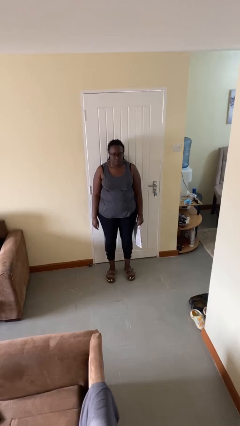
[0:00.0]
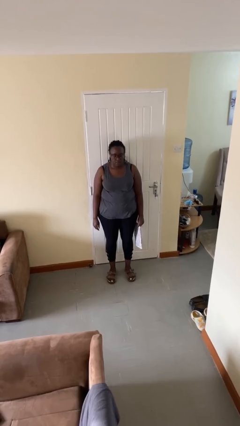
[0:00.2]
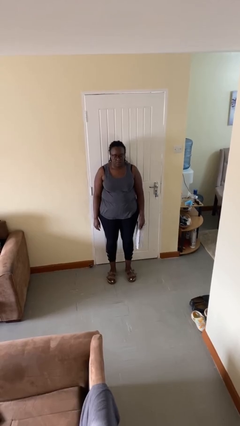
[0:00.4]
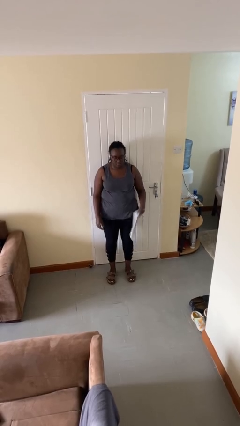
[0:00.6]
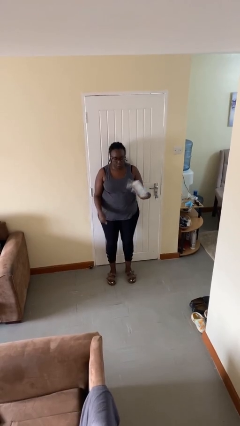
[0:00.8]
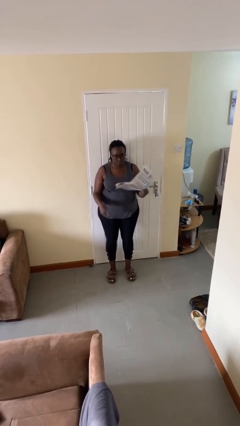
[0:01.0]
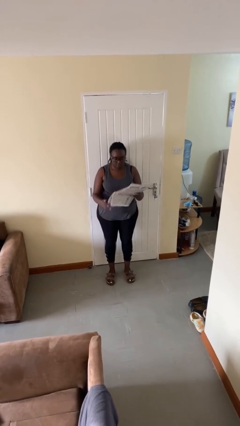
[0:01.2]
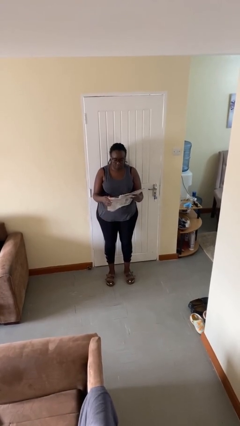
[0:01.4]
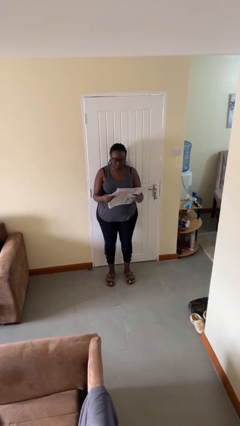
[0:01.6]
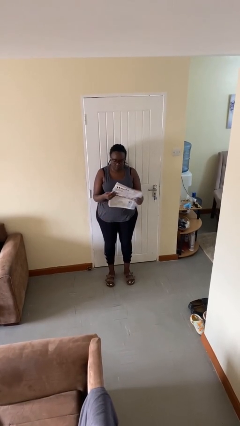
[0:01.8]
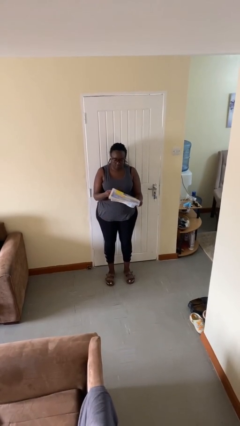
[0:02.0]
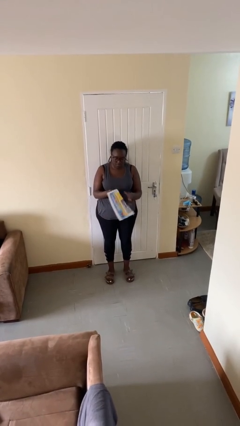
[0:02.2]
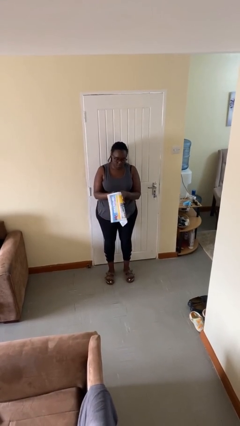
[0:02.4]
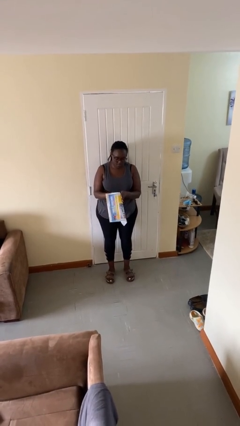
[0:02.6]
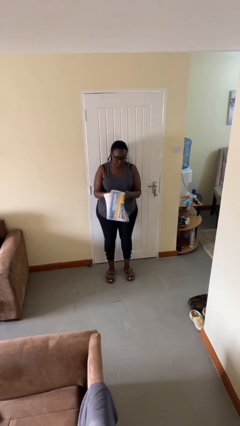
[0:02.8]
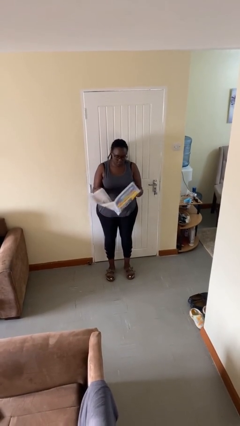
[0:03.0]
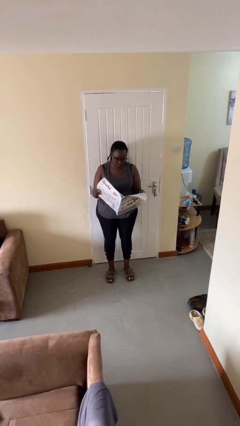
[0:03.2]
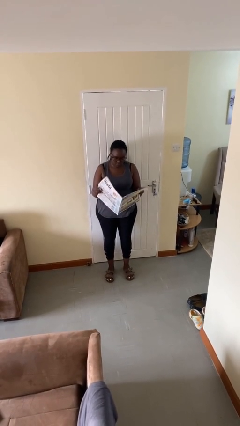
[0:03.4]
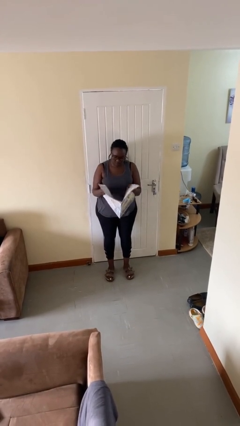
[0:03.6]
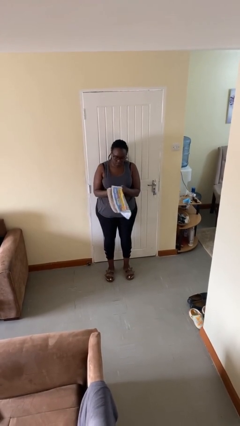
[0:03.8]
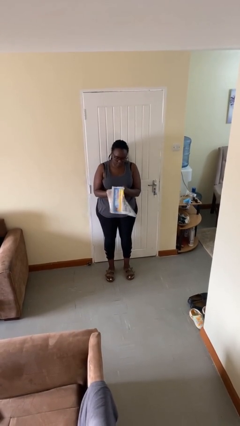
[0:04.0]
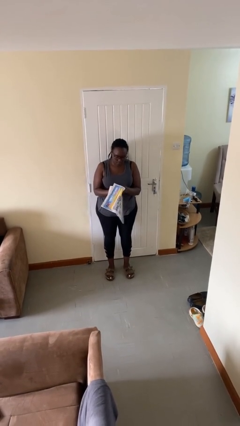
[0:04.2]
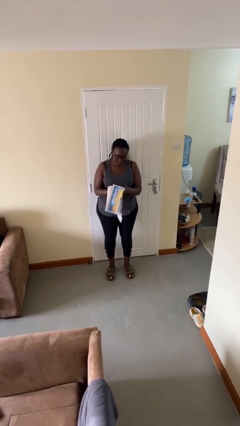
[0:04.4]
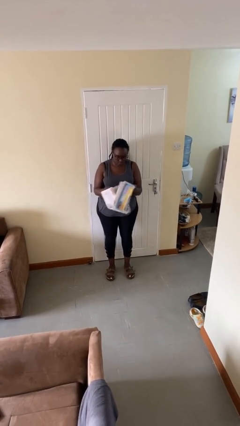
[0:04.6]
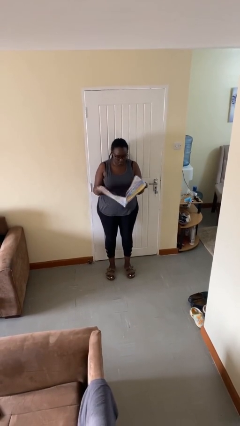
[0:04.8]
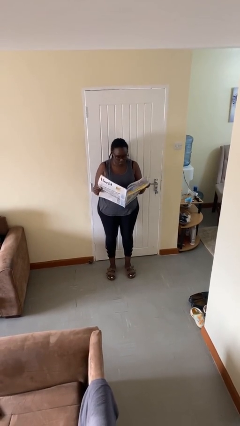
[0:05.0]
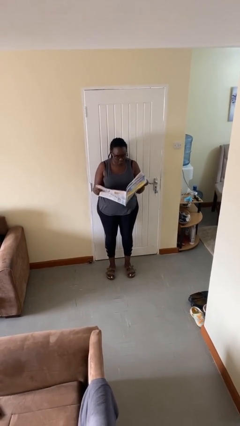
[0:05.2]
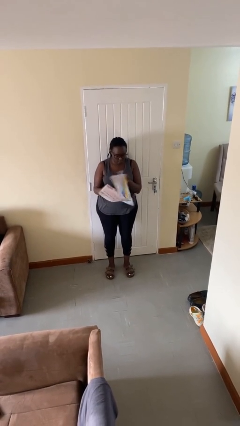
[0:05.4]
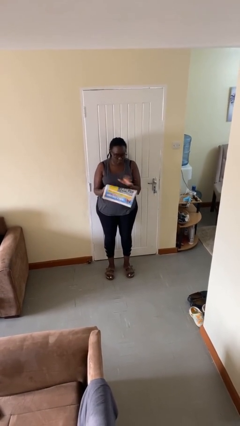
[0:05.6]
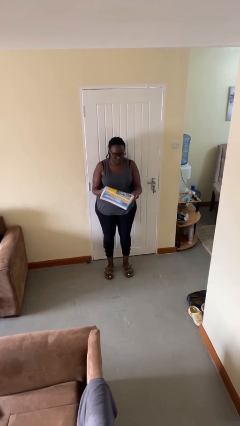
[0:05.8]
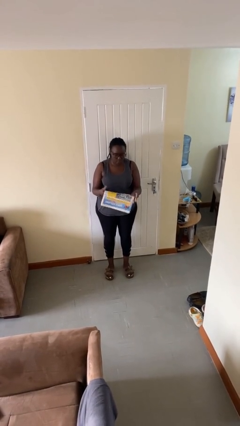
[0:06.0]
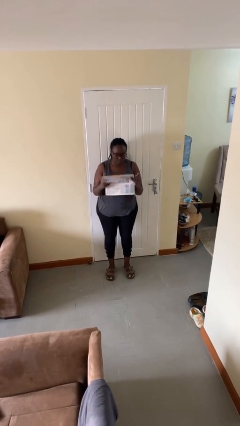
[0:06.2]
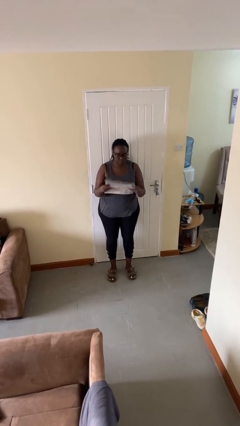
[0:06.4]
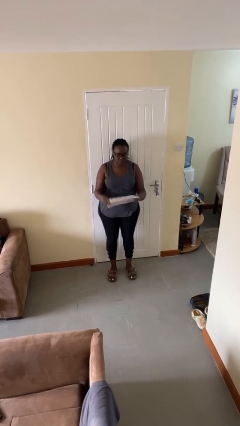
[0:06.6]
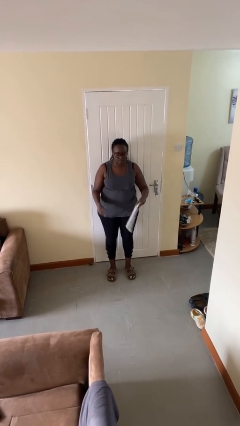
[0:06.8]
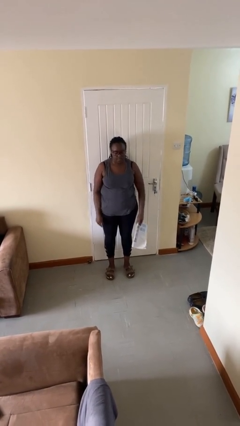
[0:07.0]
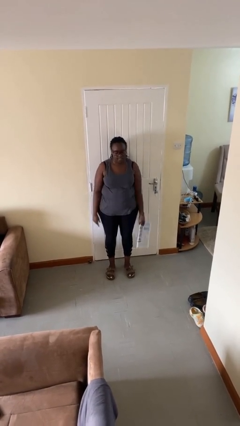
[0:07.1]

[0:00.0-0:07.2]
person reads newspaper

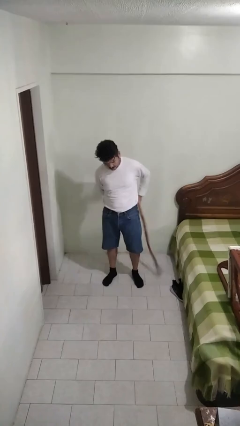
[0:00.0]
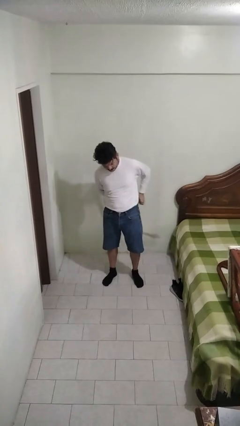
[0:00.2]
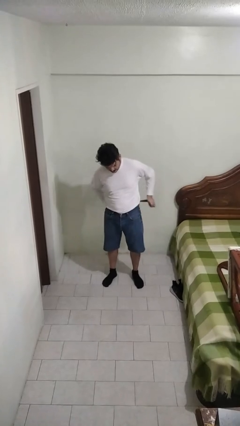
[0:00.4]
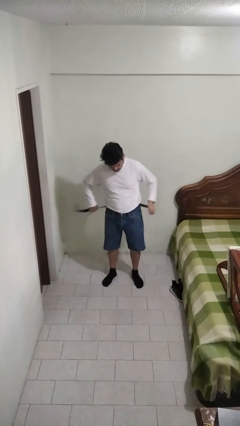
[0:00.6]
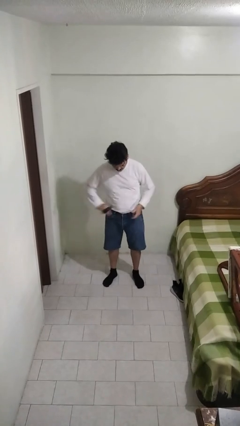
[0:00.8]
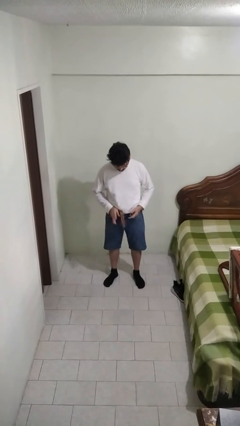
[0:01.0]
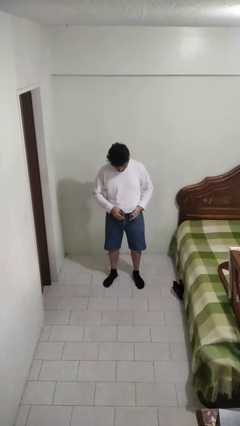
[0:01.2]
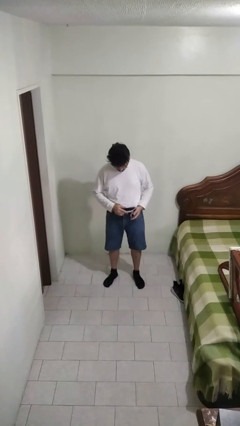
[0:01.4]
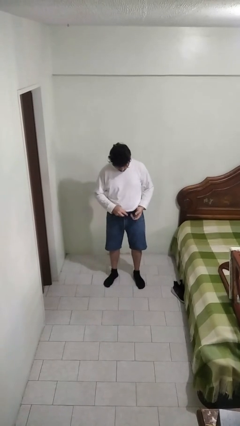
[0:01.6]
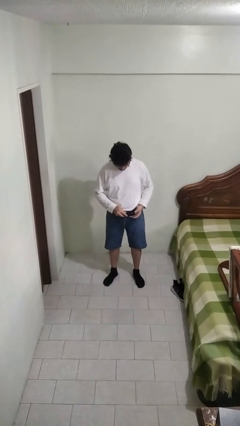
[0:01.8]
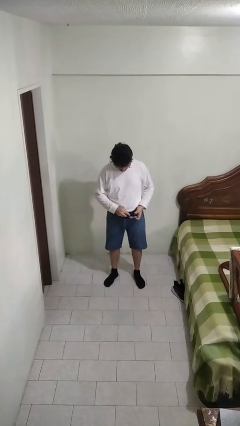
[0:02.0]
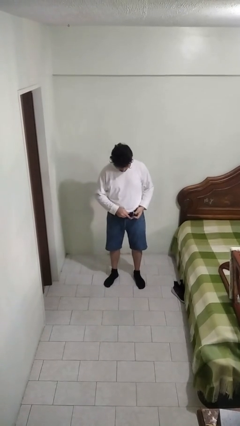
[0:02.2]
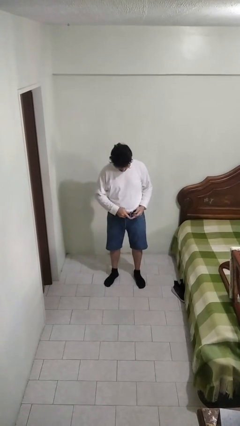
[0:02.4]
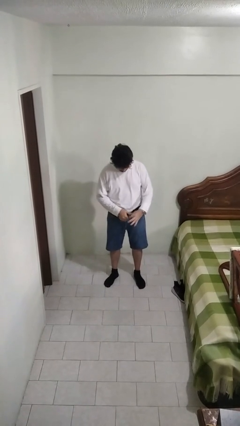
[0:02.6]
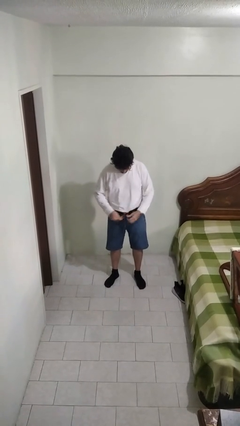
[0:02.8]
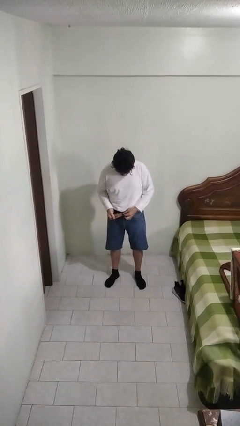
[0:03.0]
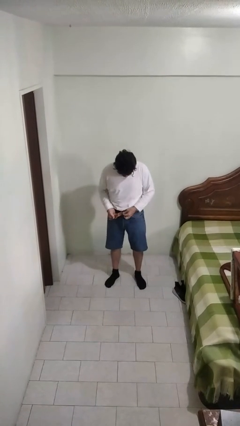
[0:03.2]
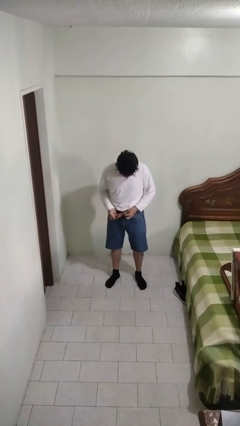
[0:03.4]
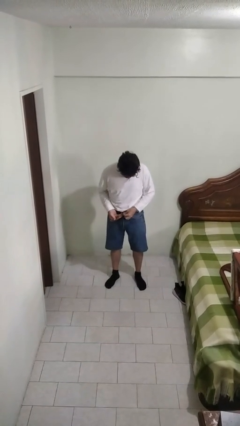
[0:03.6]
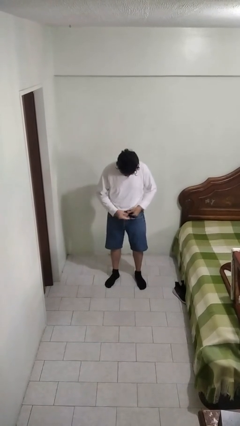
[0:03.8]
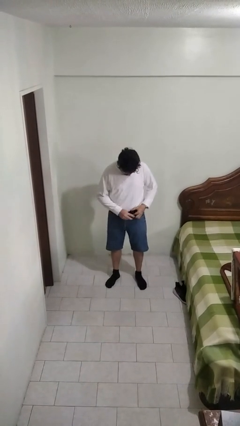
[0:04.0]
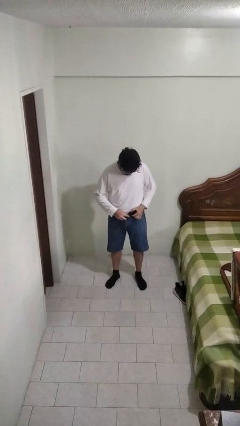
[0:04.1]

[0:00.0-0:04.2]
person puts on belt

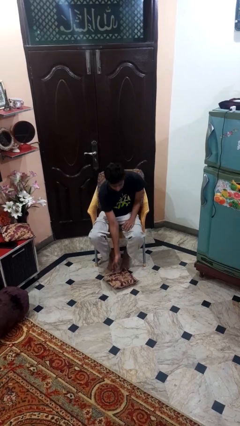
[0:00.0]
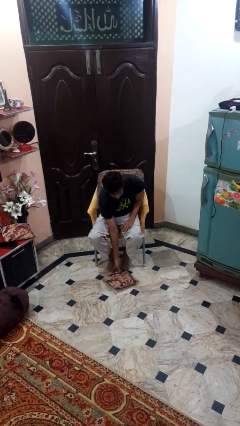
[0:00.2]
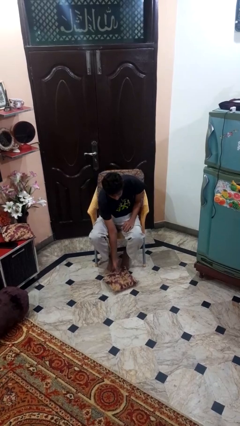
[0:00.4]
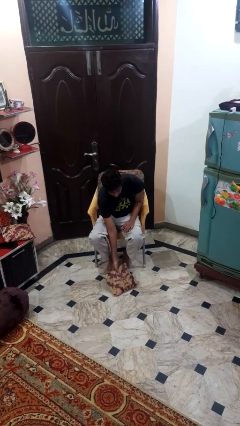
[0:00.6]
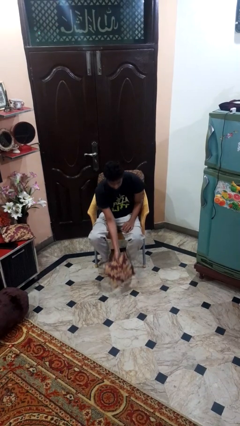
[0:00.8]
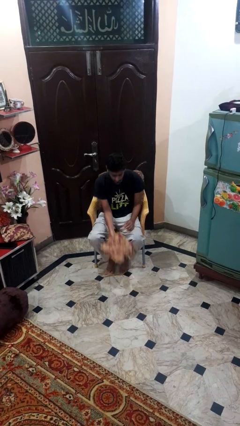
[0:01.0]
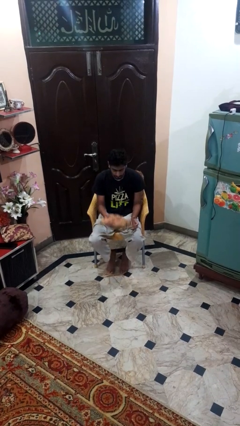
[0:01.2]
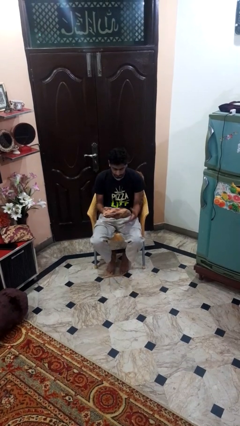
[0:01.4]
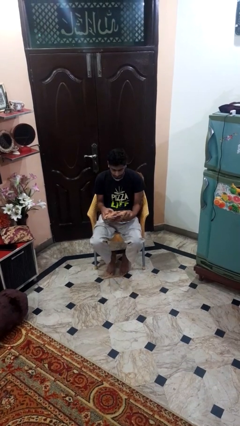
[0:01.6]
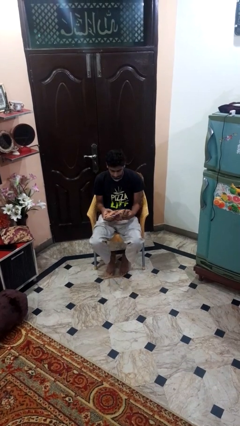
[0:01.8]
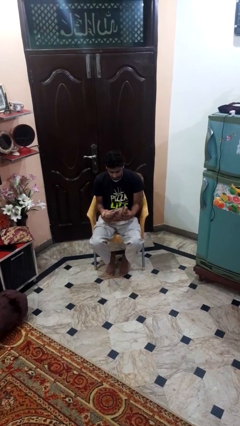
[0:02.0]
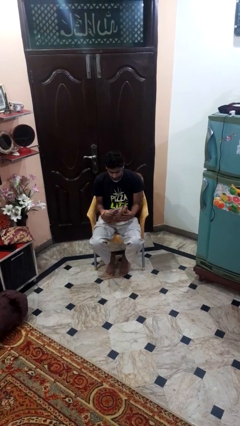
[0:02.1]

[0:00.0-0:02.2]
person picks up object from floor

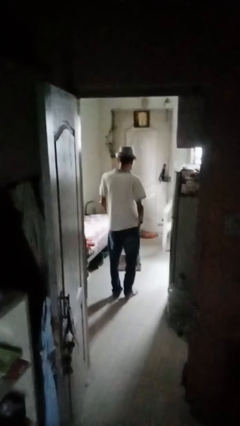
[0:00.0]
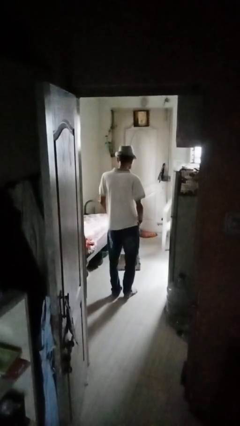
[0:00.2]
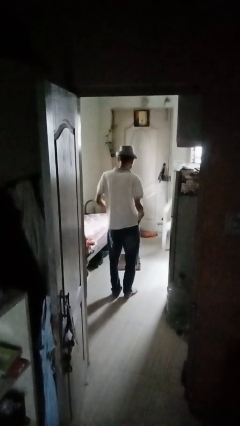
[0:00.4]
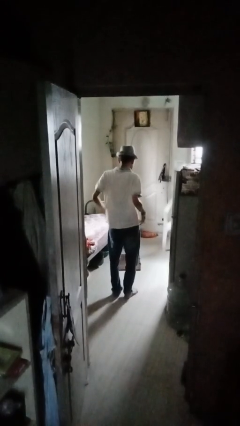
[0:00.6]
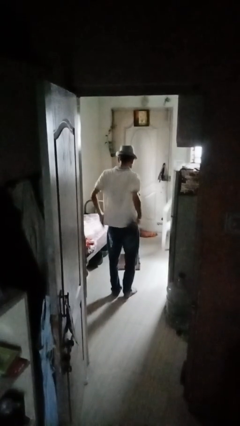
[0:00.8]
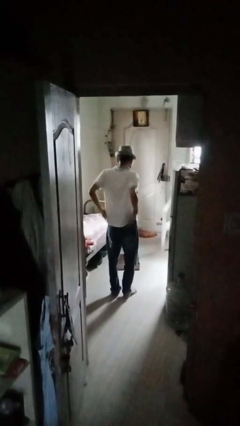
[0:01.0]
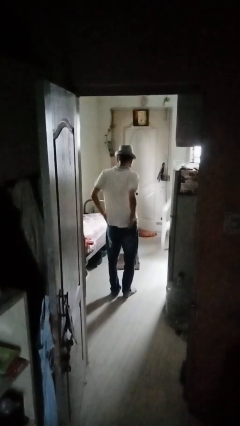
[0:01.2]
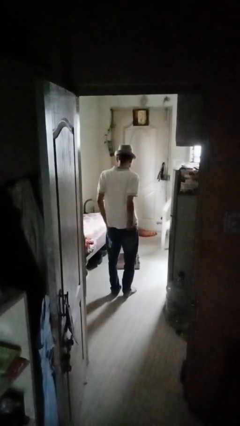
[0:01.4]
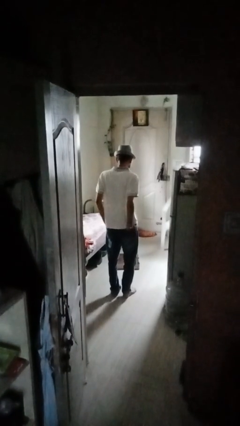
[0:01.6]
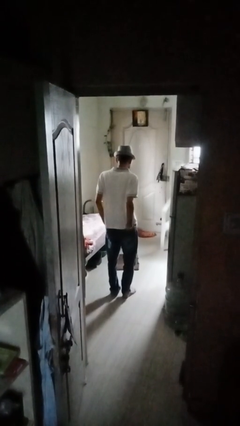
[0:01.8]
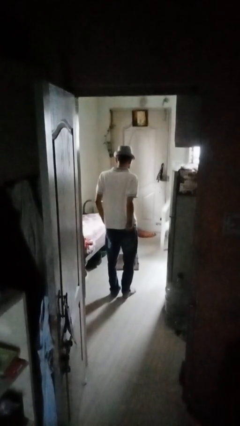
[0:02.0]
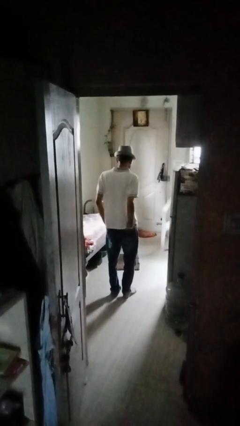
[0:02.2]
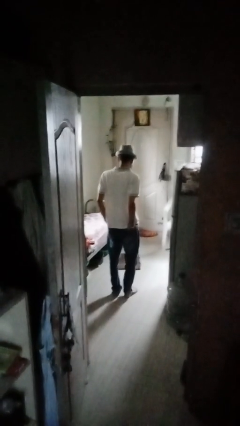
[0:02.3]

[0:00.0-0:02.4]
person puts hands in back pockets

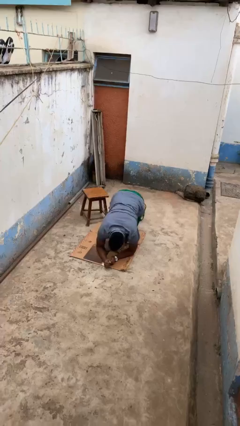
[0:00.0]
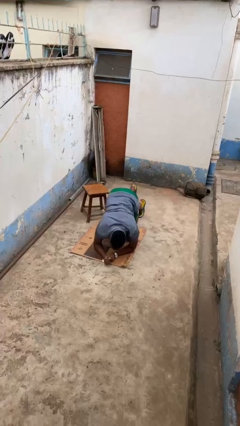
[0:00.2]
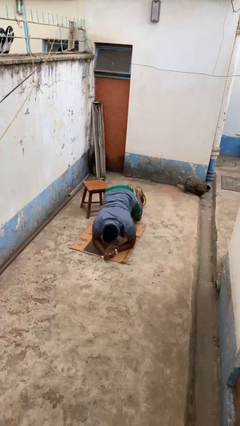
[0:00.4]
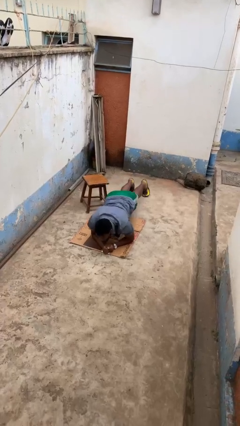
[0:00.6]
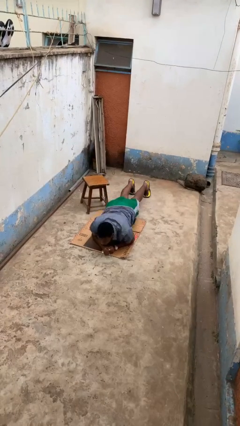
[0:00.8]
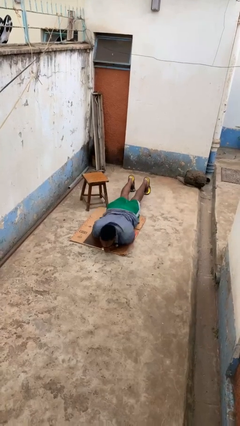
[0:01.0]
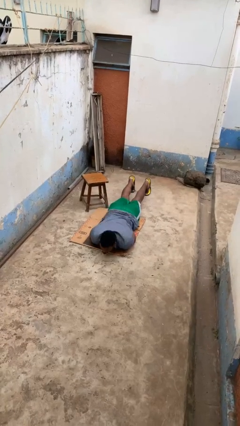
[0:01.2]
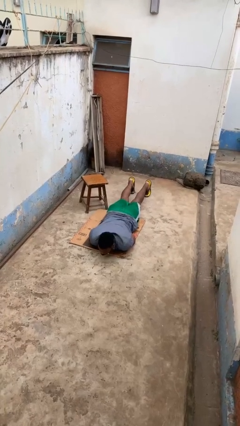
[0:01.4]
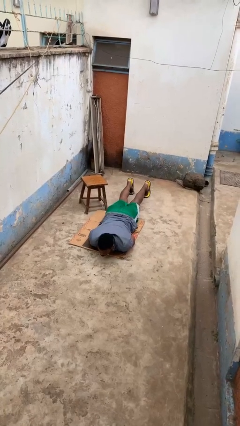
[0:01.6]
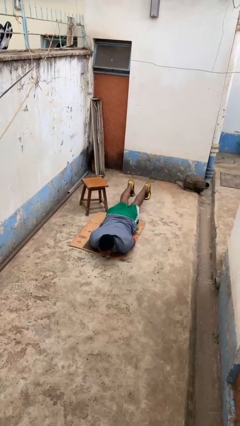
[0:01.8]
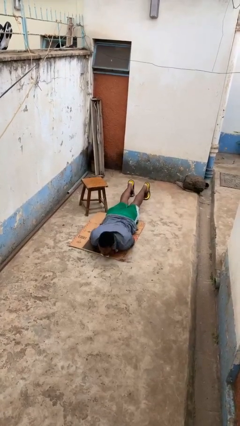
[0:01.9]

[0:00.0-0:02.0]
person lies down on floor
